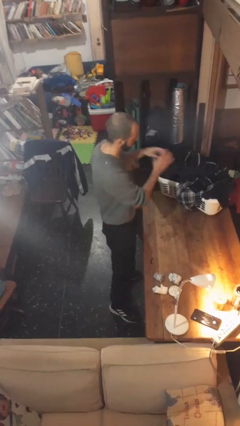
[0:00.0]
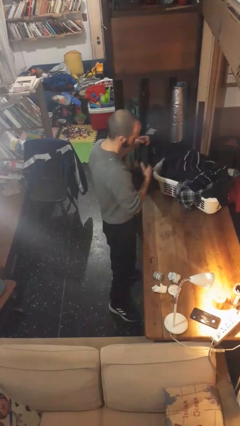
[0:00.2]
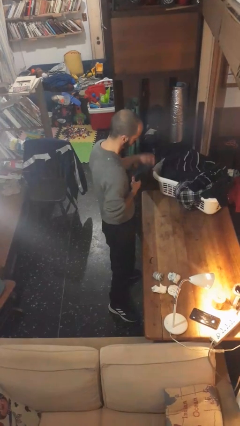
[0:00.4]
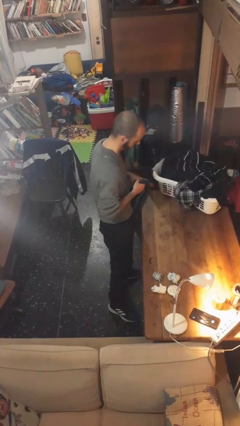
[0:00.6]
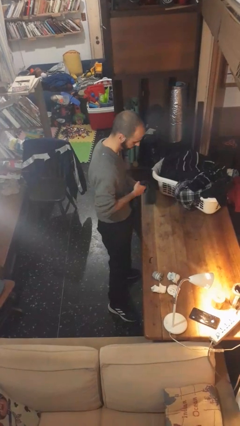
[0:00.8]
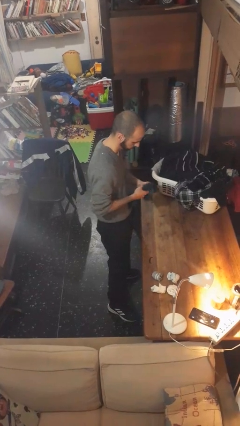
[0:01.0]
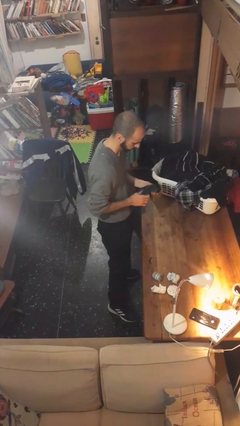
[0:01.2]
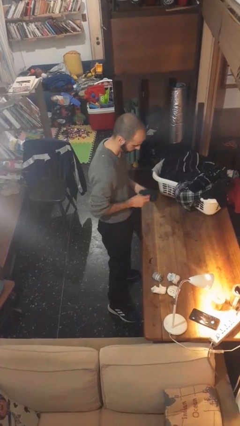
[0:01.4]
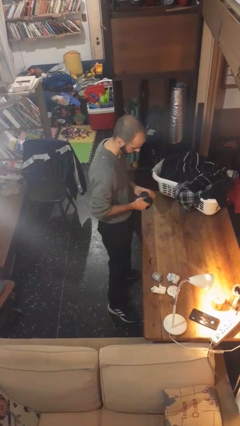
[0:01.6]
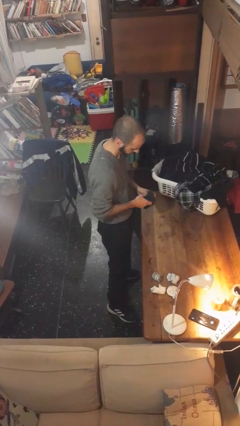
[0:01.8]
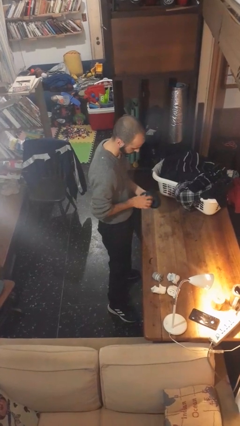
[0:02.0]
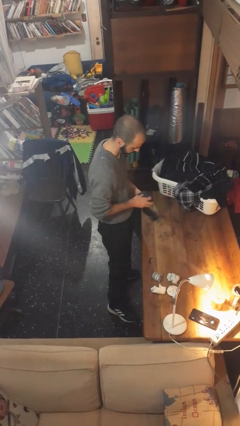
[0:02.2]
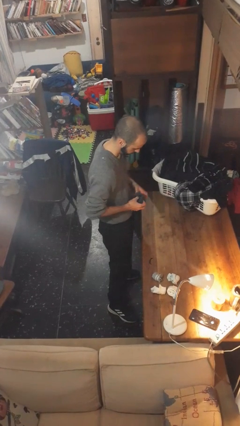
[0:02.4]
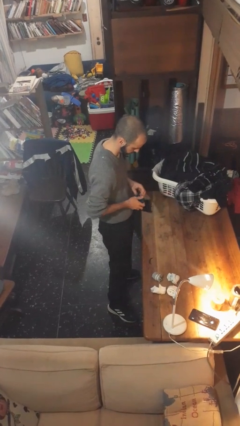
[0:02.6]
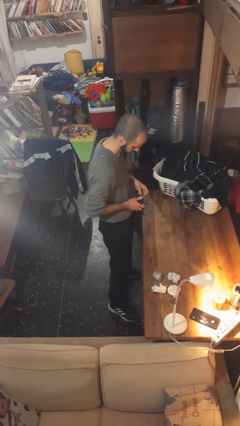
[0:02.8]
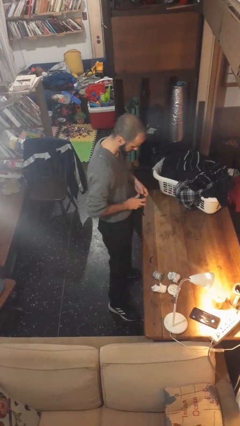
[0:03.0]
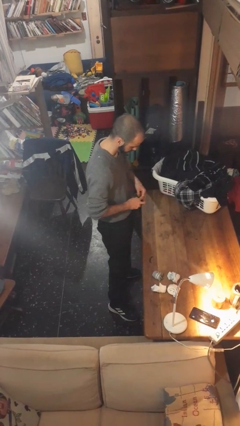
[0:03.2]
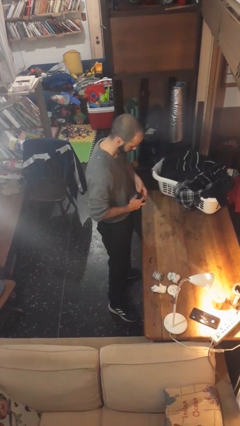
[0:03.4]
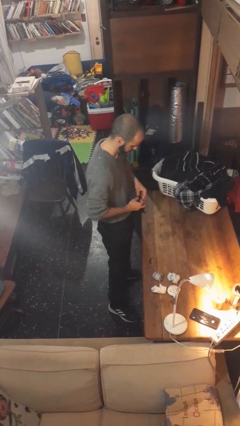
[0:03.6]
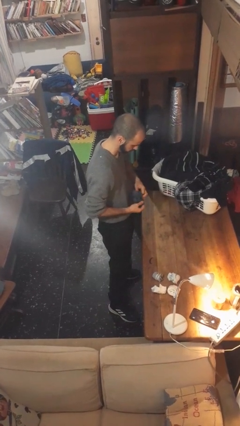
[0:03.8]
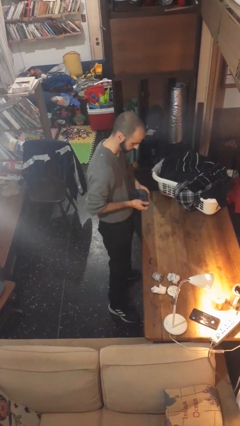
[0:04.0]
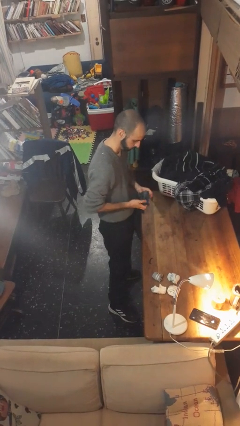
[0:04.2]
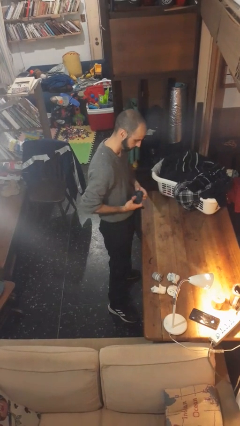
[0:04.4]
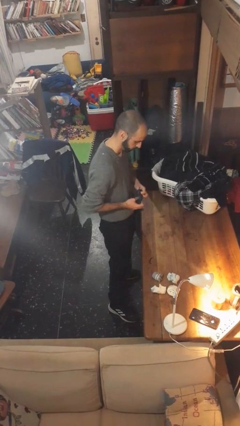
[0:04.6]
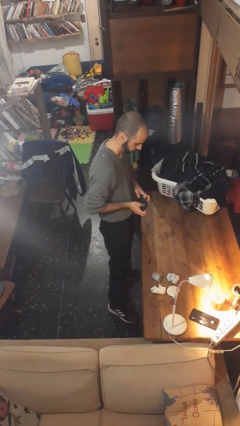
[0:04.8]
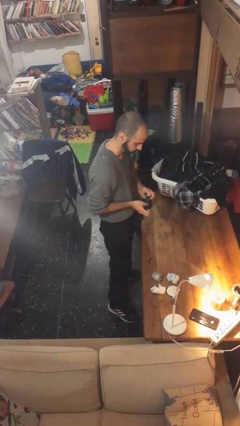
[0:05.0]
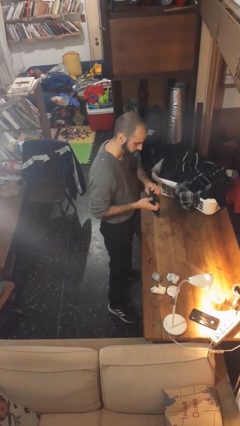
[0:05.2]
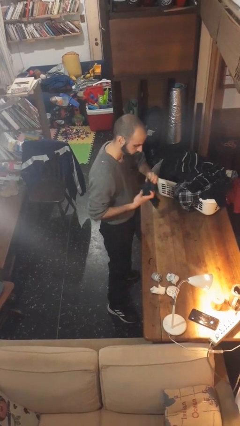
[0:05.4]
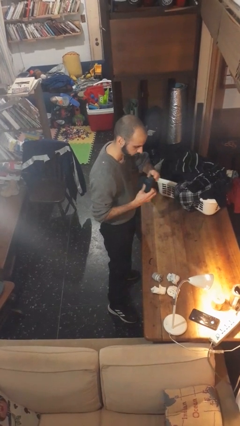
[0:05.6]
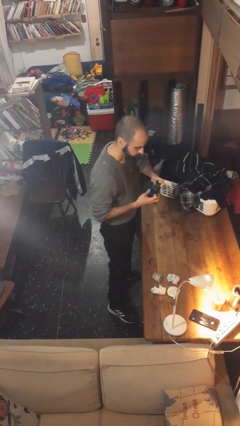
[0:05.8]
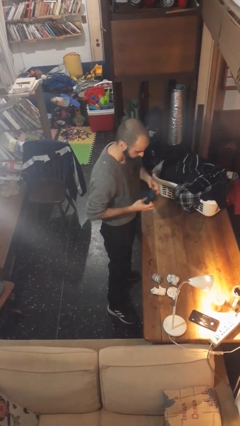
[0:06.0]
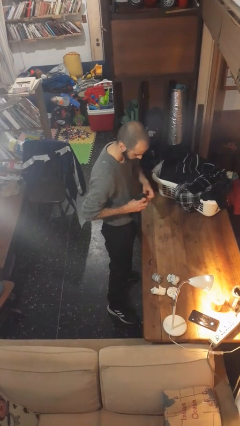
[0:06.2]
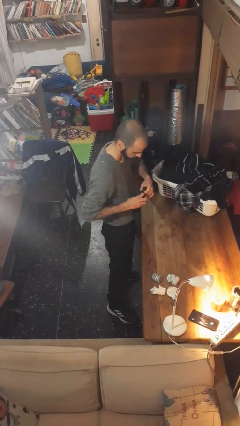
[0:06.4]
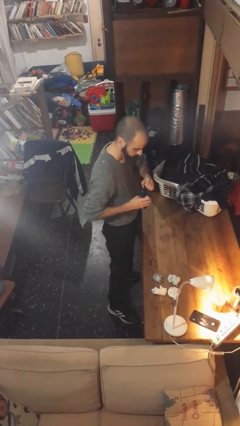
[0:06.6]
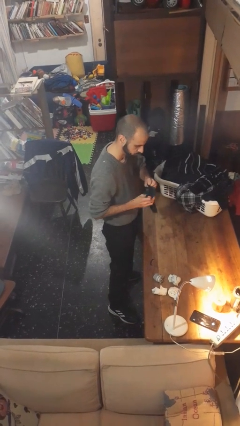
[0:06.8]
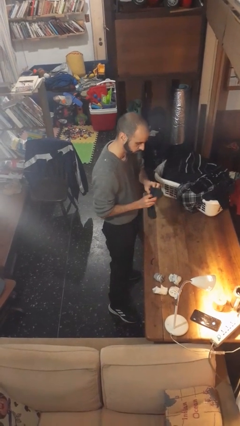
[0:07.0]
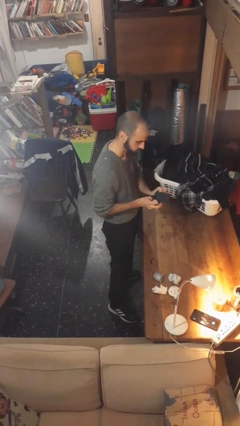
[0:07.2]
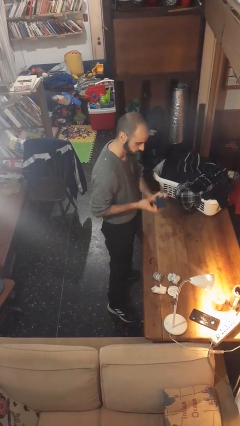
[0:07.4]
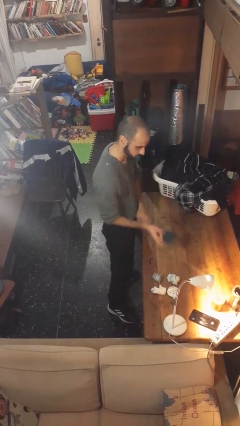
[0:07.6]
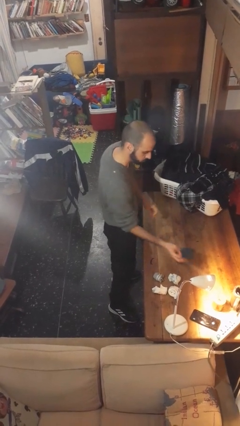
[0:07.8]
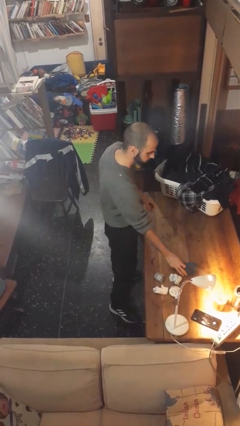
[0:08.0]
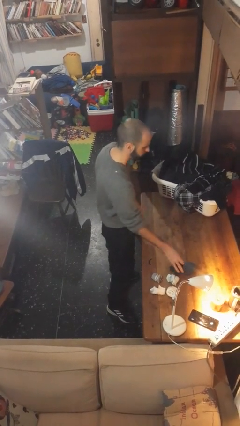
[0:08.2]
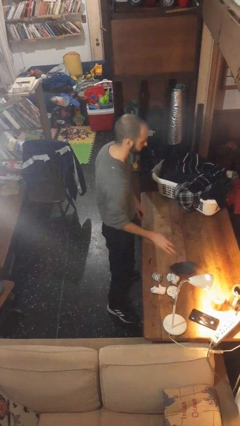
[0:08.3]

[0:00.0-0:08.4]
person folds socks

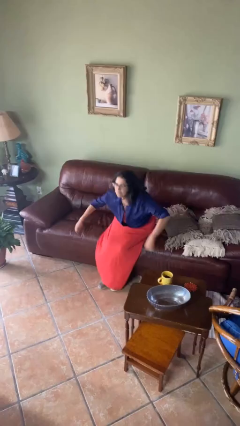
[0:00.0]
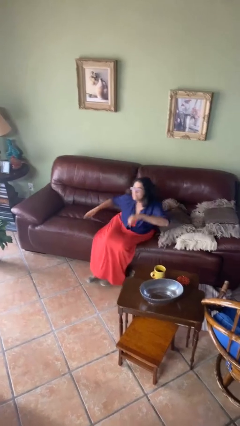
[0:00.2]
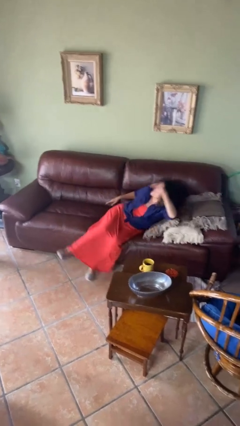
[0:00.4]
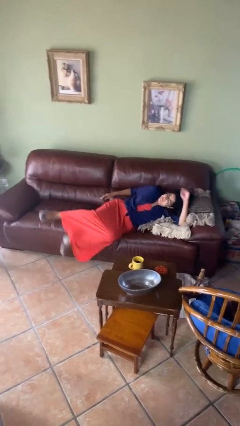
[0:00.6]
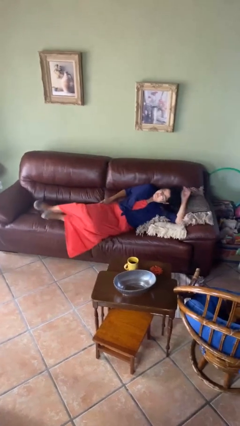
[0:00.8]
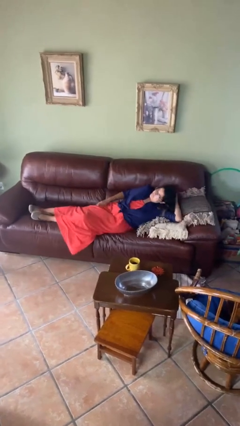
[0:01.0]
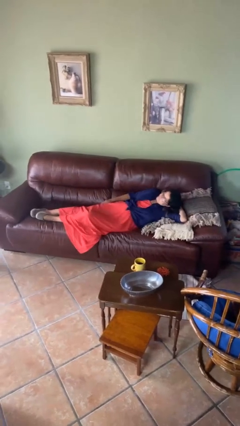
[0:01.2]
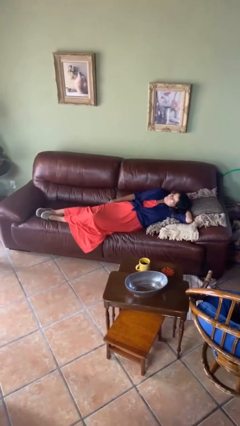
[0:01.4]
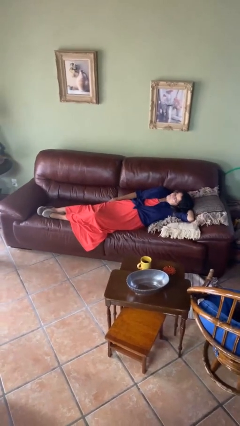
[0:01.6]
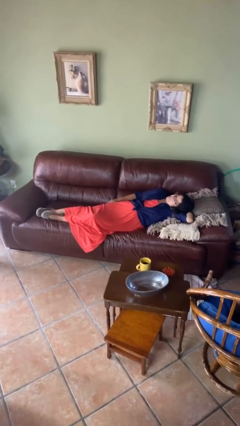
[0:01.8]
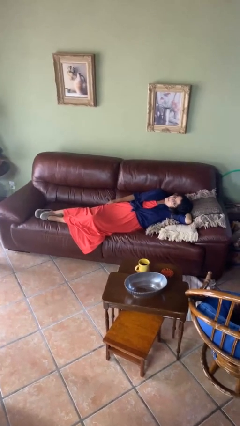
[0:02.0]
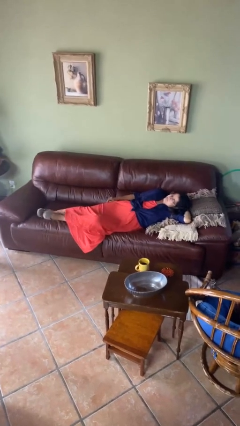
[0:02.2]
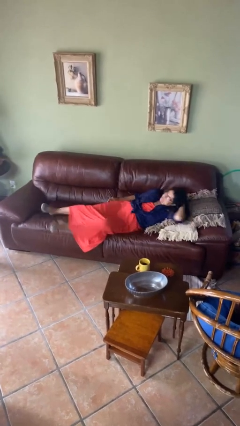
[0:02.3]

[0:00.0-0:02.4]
person lies down on couch

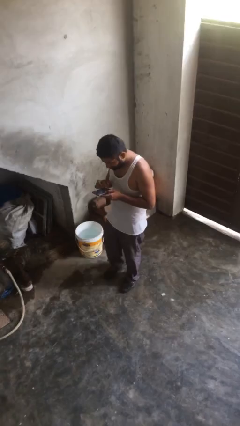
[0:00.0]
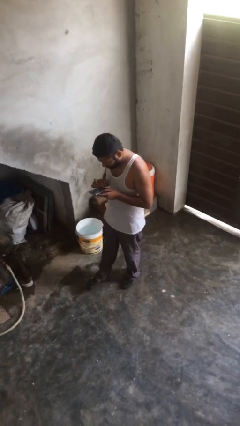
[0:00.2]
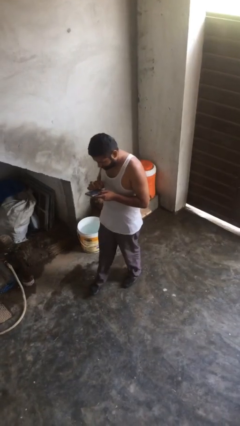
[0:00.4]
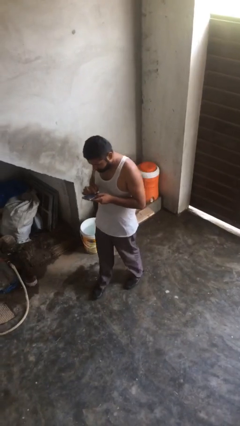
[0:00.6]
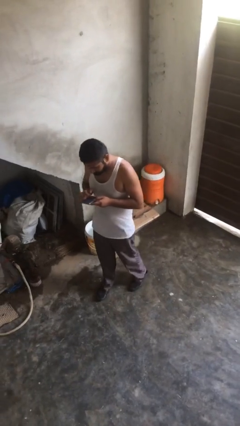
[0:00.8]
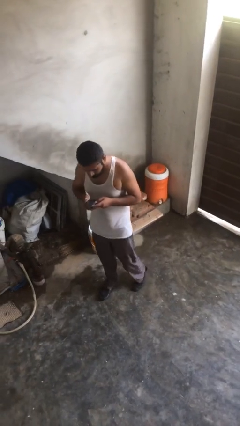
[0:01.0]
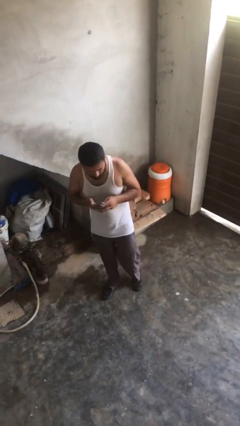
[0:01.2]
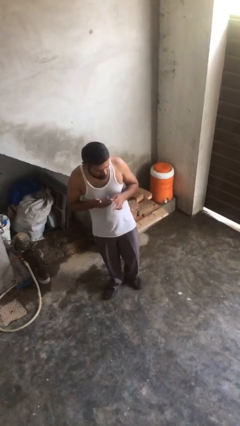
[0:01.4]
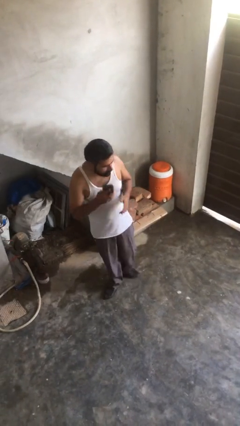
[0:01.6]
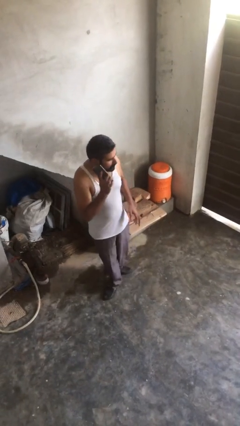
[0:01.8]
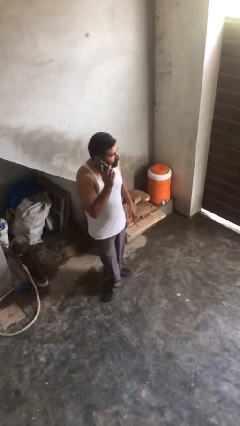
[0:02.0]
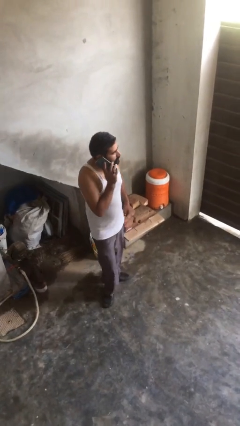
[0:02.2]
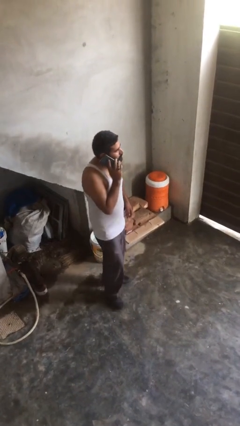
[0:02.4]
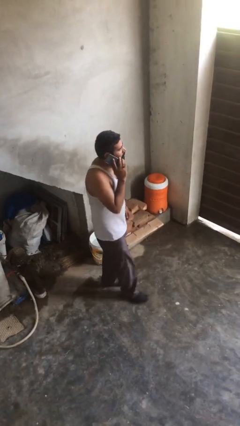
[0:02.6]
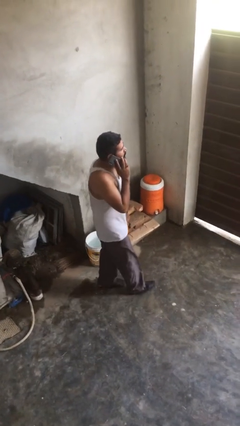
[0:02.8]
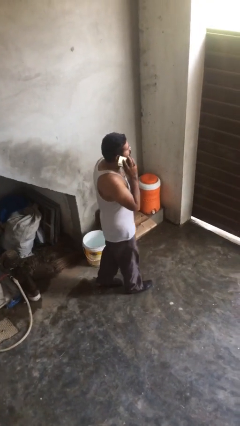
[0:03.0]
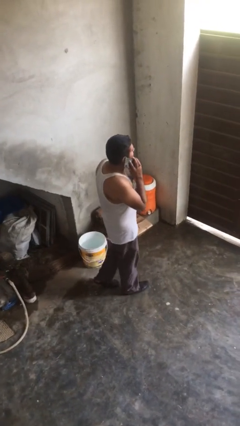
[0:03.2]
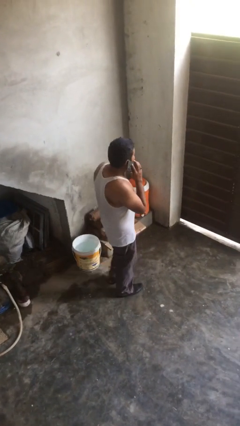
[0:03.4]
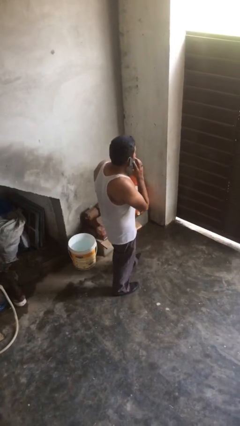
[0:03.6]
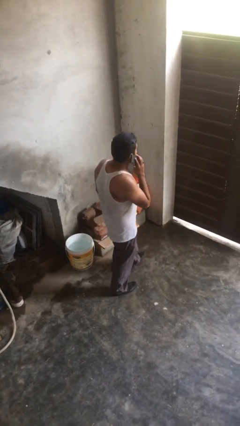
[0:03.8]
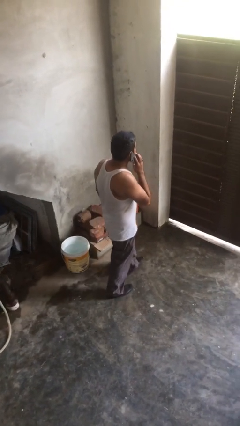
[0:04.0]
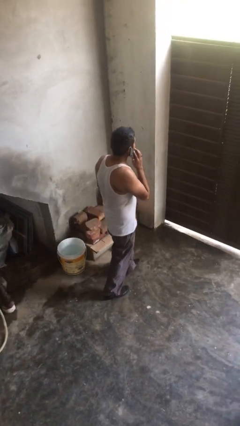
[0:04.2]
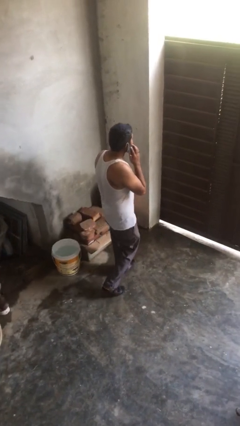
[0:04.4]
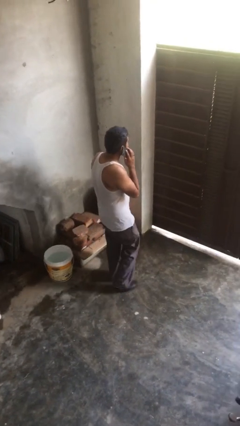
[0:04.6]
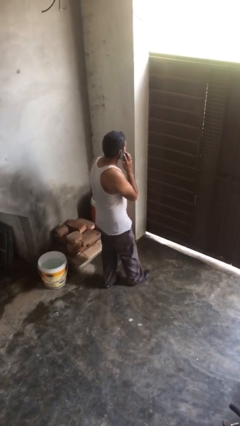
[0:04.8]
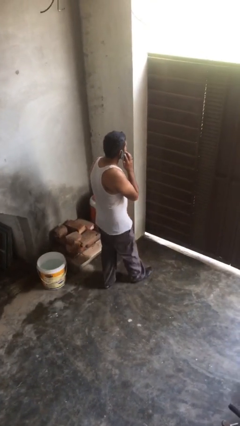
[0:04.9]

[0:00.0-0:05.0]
person talks on phone

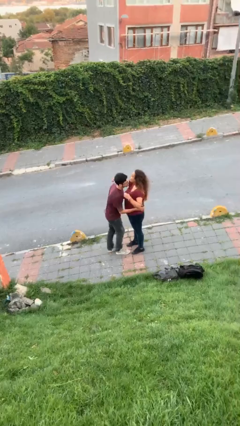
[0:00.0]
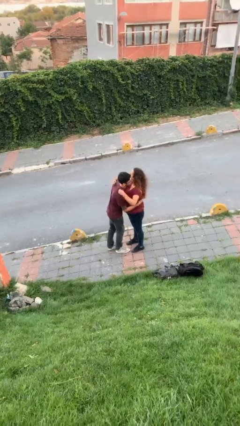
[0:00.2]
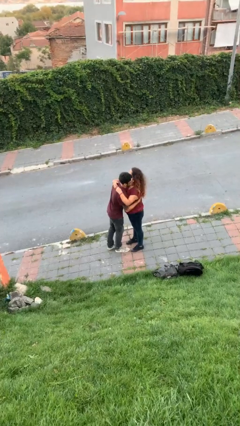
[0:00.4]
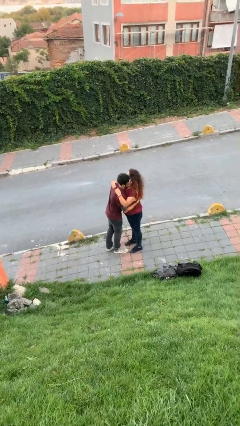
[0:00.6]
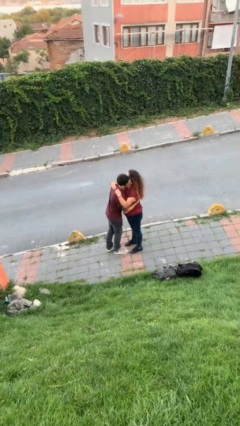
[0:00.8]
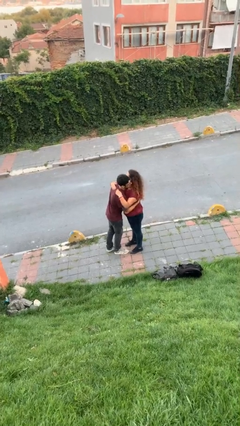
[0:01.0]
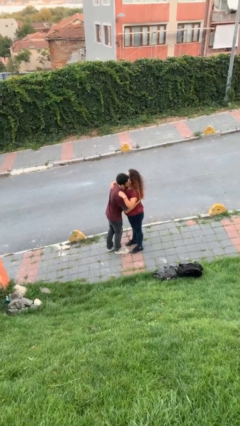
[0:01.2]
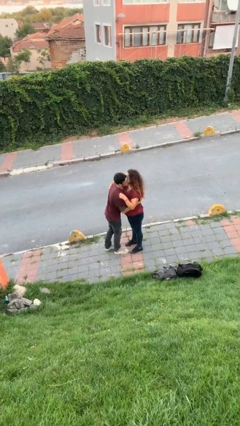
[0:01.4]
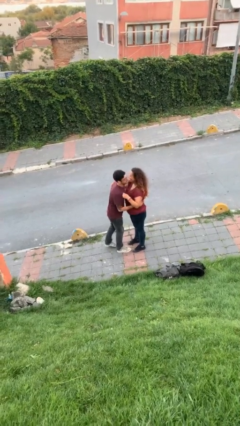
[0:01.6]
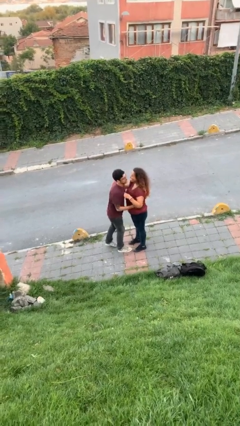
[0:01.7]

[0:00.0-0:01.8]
person embraces person

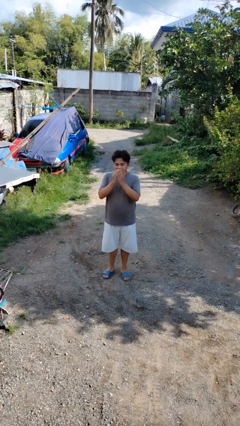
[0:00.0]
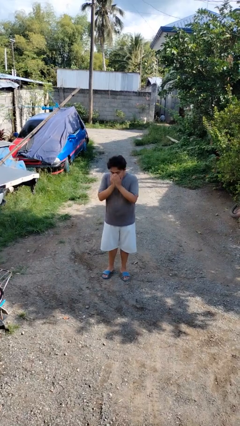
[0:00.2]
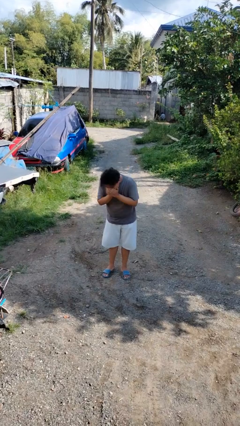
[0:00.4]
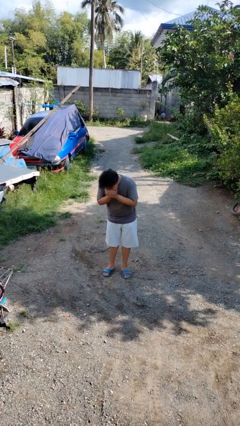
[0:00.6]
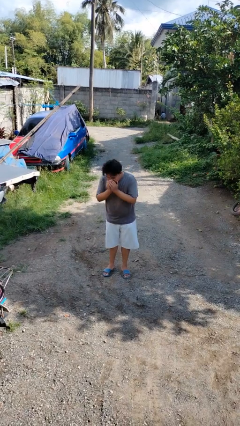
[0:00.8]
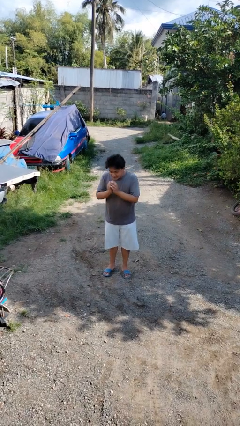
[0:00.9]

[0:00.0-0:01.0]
person sneezes into hand
